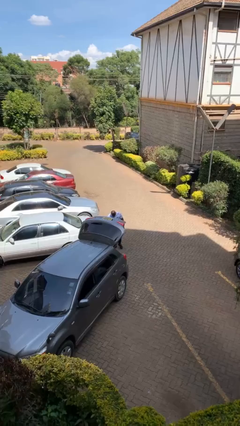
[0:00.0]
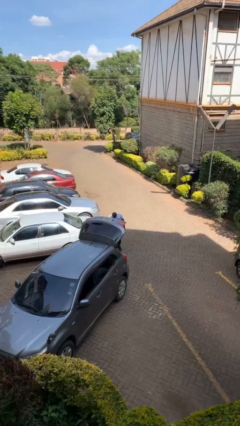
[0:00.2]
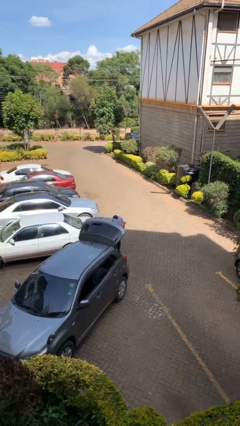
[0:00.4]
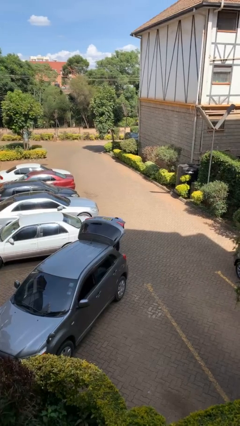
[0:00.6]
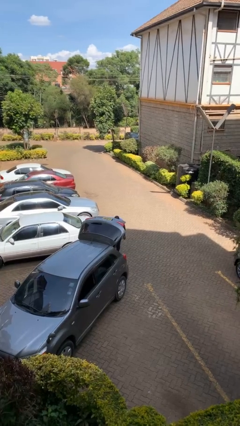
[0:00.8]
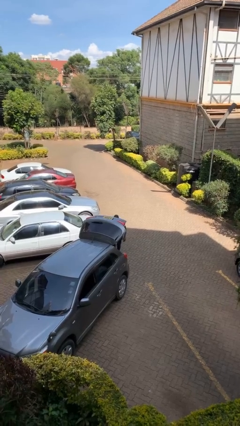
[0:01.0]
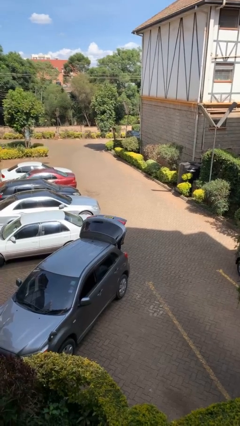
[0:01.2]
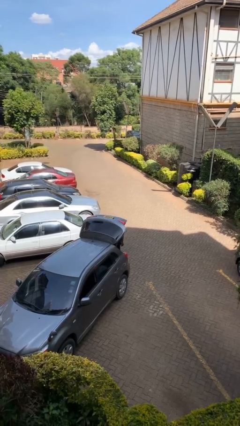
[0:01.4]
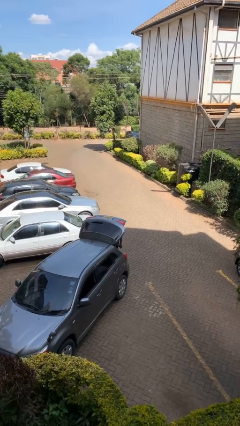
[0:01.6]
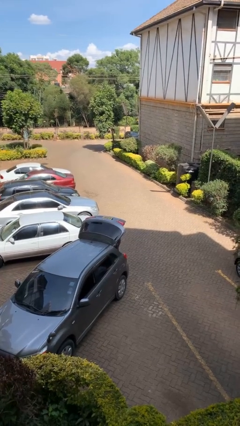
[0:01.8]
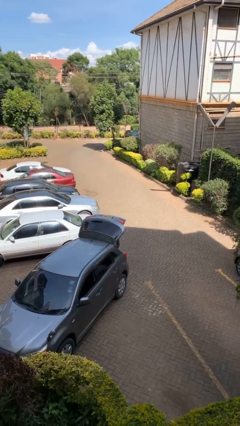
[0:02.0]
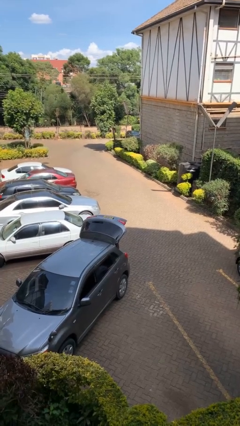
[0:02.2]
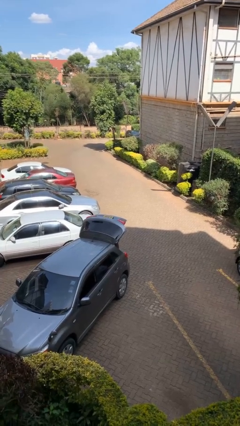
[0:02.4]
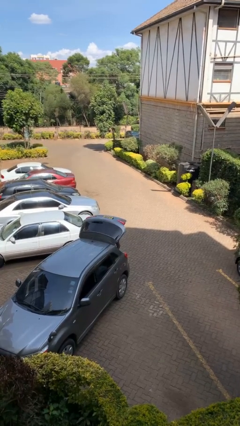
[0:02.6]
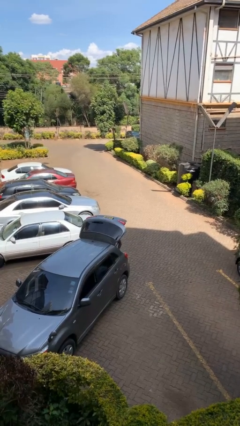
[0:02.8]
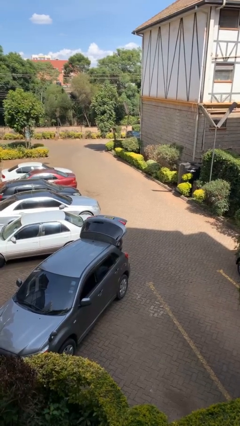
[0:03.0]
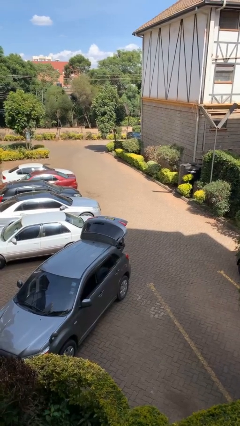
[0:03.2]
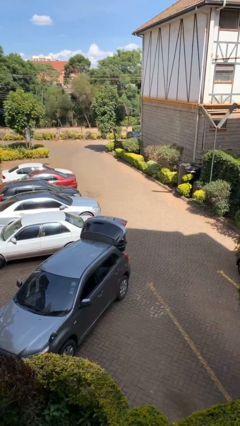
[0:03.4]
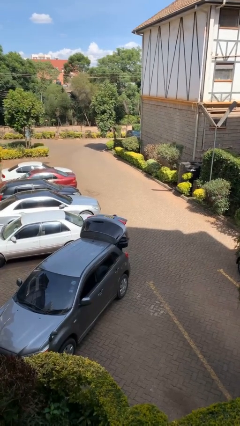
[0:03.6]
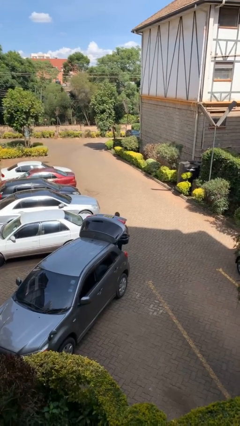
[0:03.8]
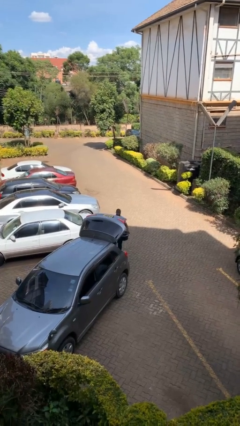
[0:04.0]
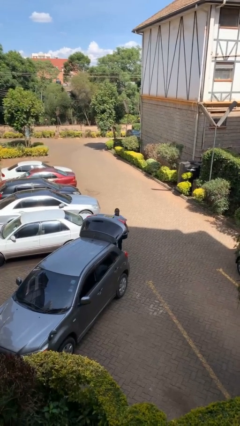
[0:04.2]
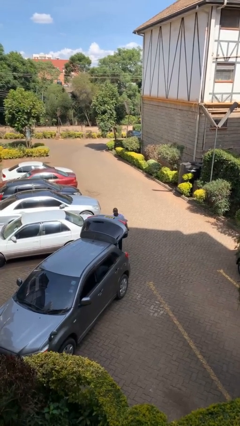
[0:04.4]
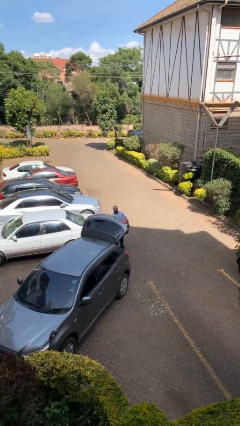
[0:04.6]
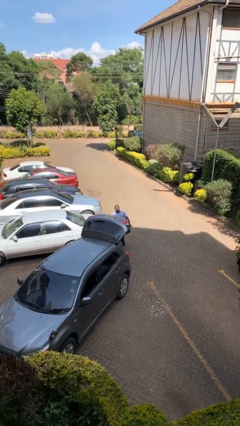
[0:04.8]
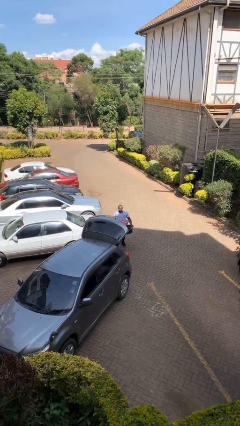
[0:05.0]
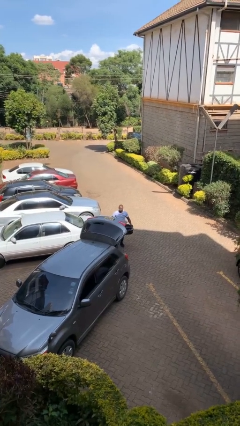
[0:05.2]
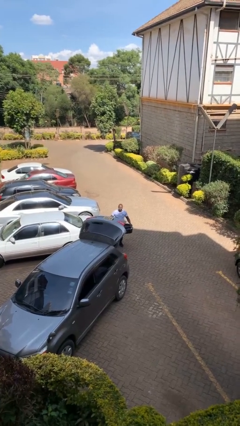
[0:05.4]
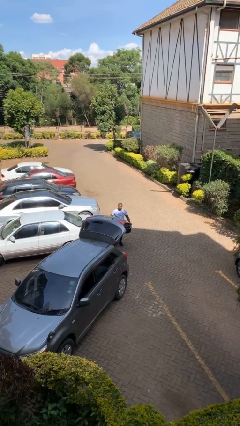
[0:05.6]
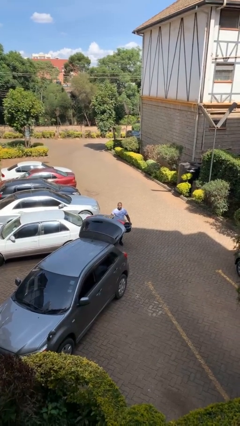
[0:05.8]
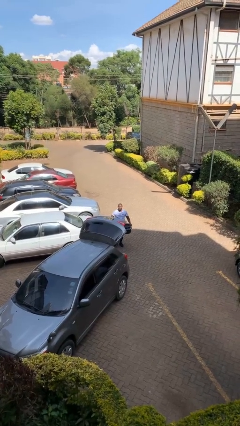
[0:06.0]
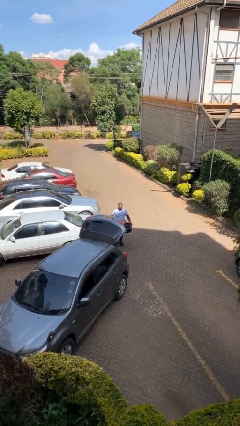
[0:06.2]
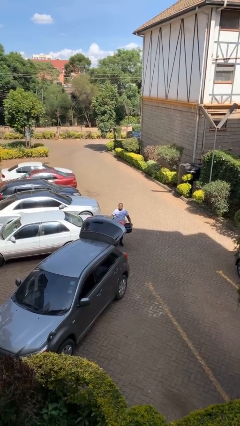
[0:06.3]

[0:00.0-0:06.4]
person unloads car

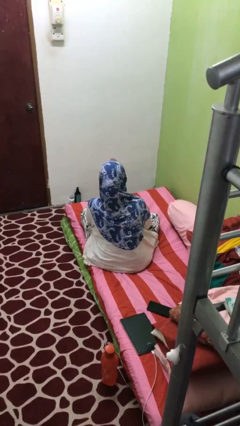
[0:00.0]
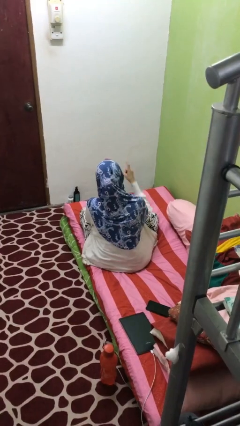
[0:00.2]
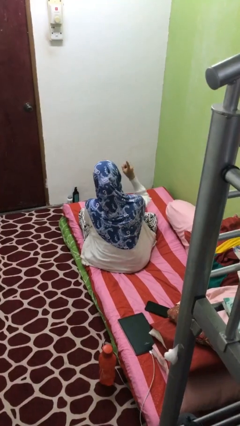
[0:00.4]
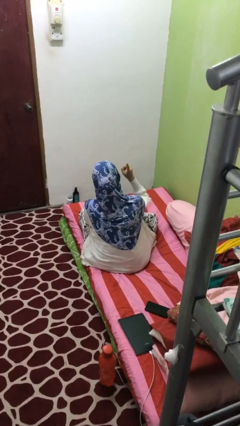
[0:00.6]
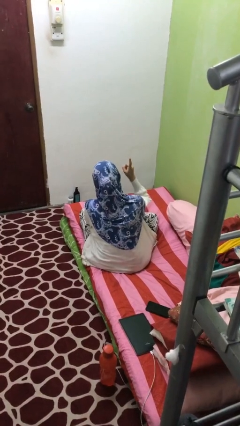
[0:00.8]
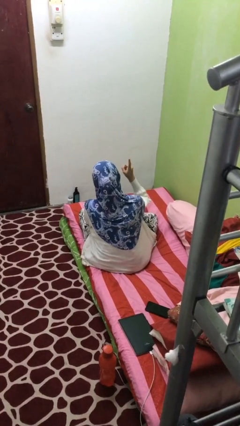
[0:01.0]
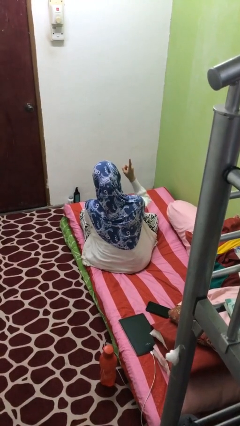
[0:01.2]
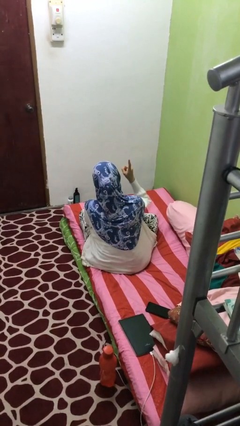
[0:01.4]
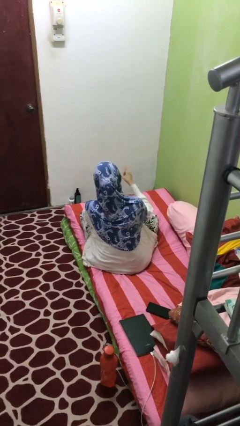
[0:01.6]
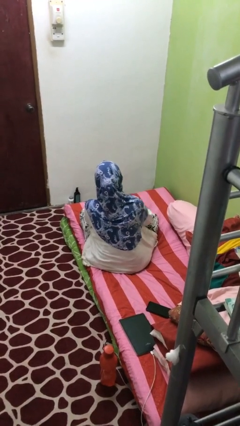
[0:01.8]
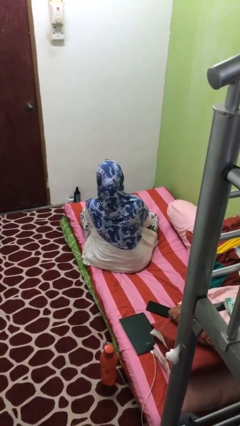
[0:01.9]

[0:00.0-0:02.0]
person gestures number one

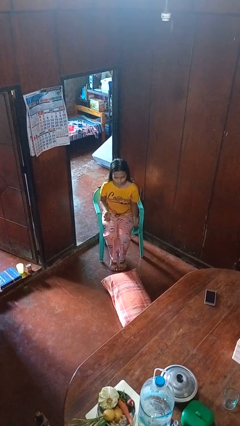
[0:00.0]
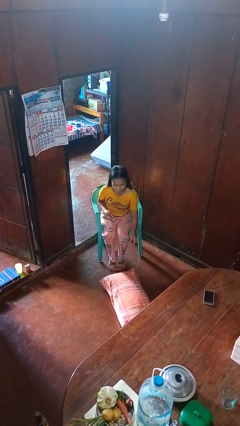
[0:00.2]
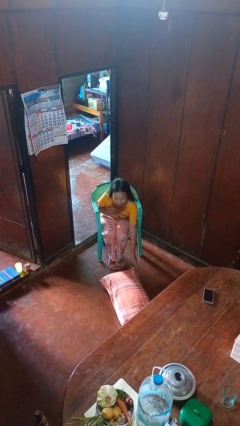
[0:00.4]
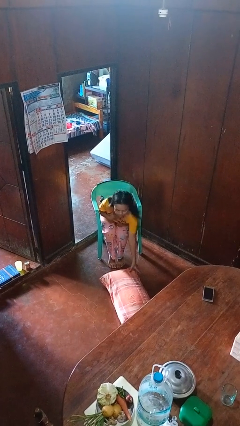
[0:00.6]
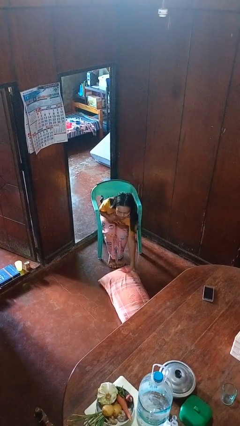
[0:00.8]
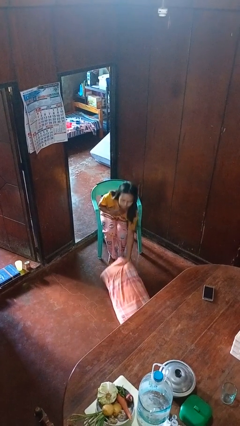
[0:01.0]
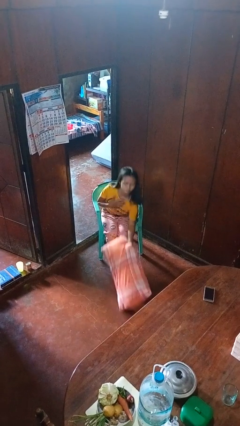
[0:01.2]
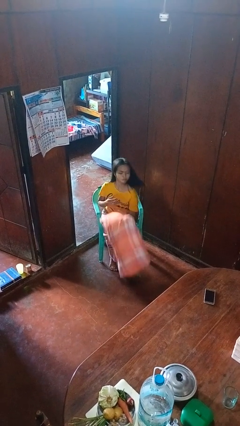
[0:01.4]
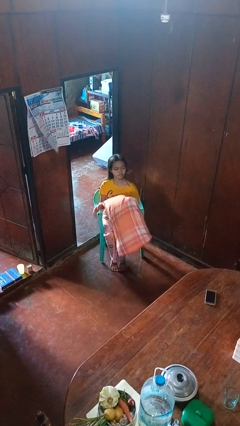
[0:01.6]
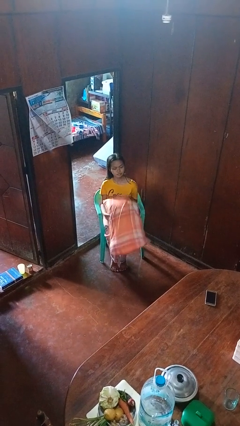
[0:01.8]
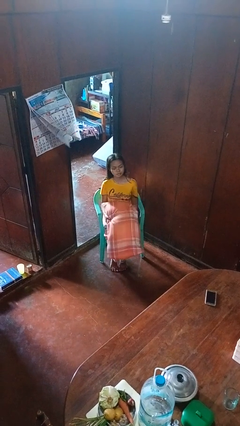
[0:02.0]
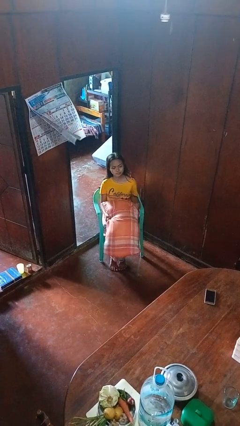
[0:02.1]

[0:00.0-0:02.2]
person picks up object from floor

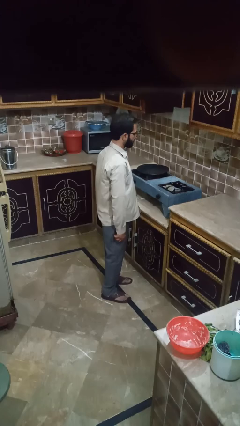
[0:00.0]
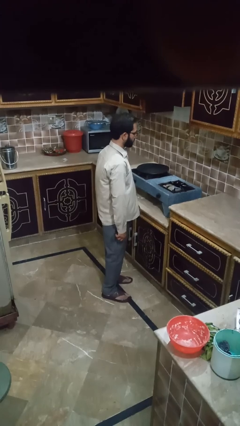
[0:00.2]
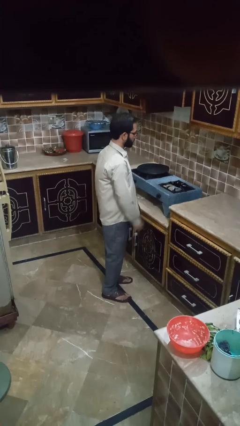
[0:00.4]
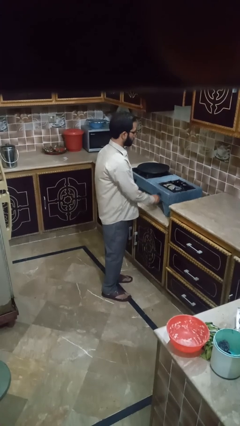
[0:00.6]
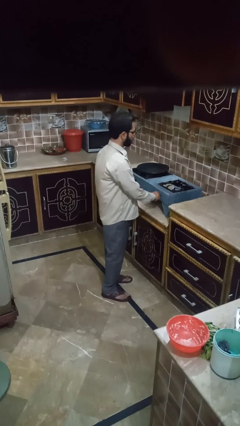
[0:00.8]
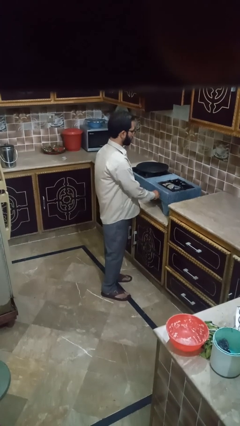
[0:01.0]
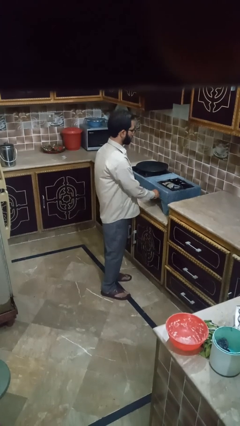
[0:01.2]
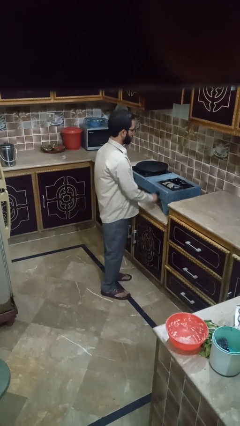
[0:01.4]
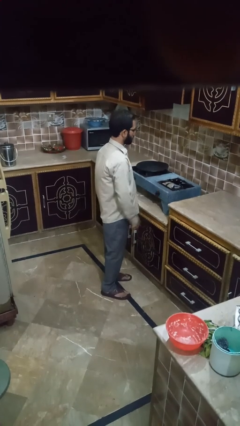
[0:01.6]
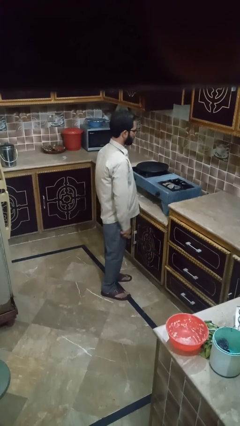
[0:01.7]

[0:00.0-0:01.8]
person turns on stovetop

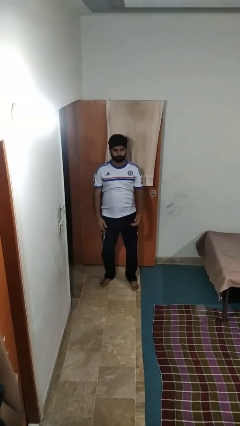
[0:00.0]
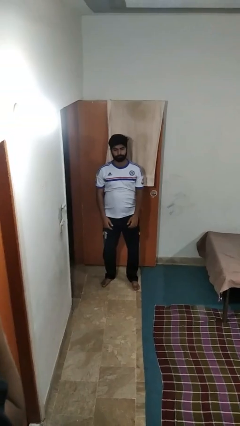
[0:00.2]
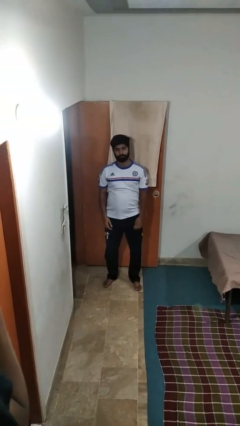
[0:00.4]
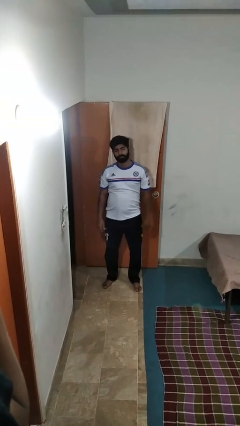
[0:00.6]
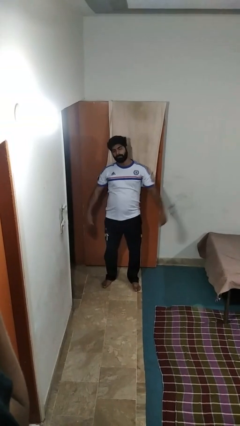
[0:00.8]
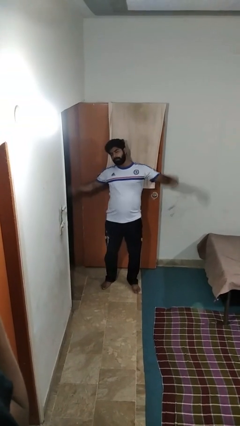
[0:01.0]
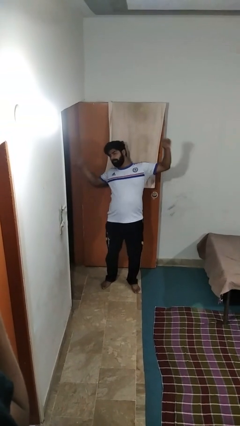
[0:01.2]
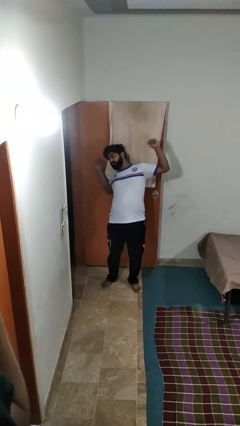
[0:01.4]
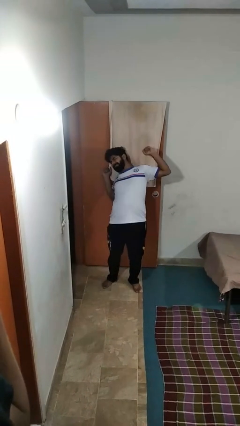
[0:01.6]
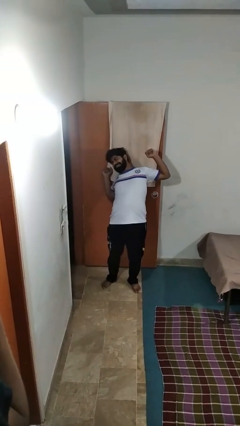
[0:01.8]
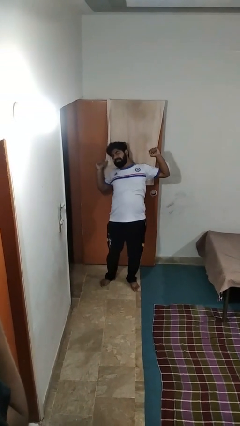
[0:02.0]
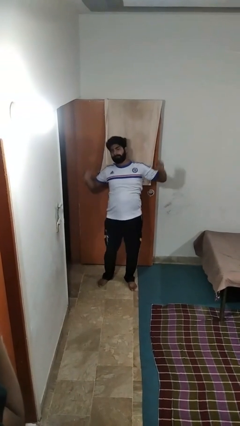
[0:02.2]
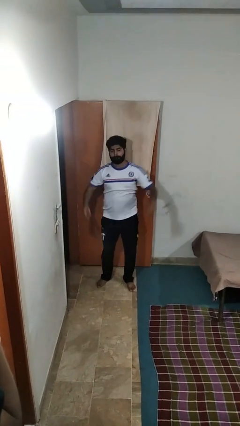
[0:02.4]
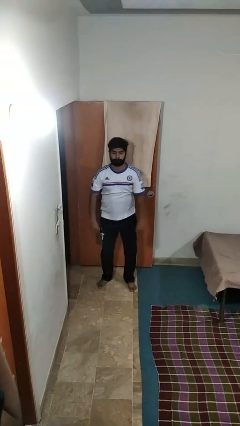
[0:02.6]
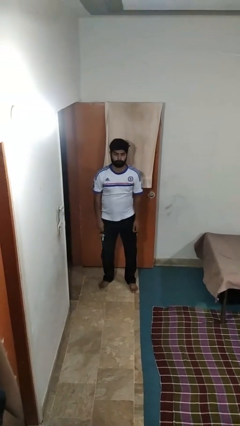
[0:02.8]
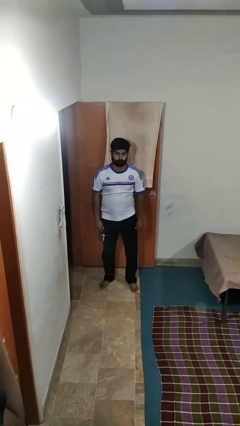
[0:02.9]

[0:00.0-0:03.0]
person stretches arms to side

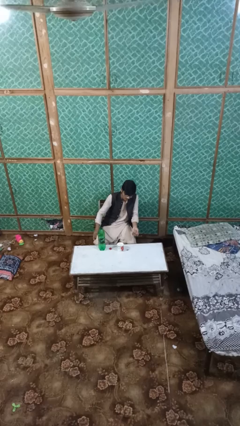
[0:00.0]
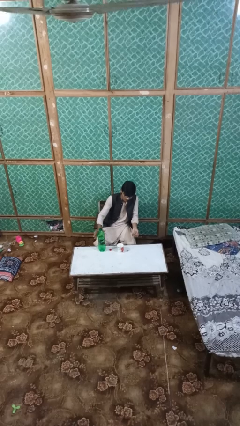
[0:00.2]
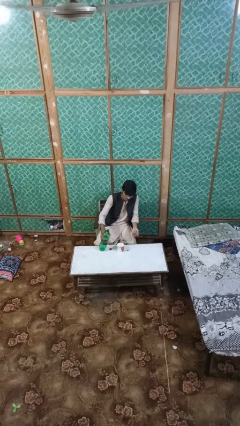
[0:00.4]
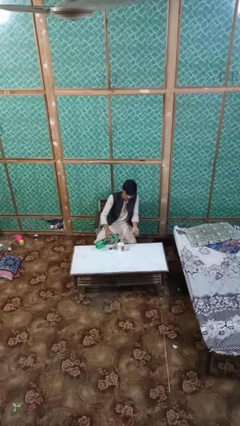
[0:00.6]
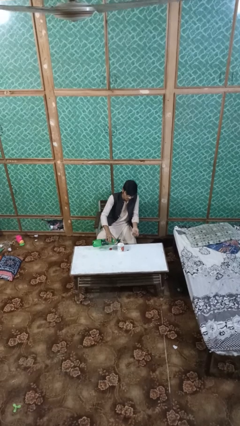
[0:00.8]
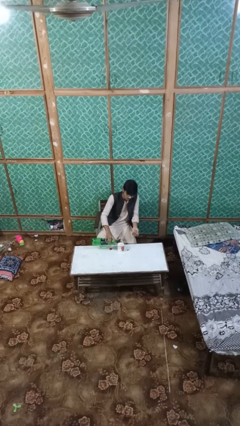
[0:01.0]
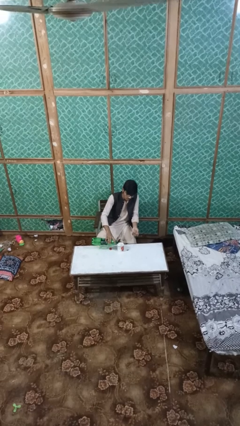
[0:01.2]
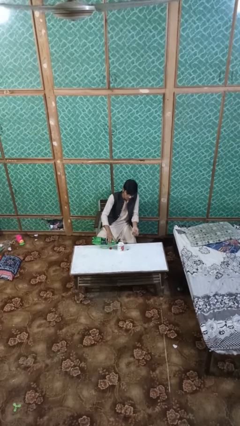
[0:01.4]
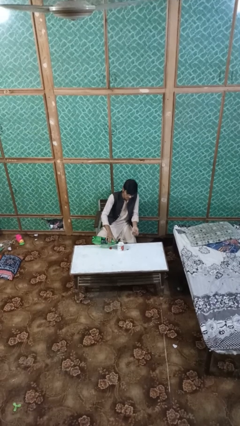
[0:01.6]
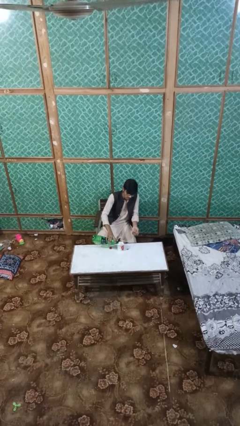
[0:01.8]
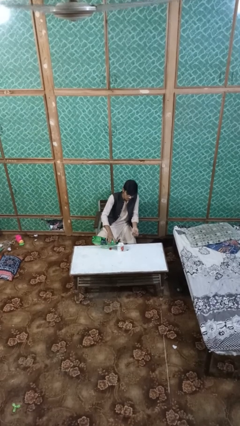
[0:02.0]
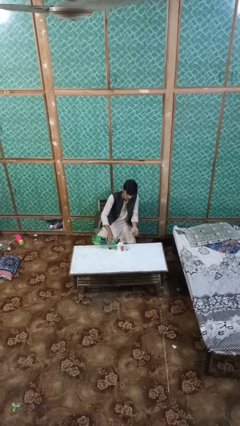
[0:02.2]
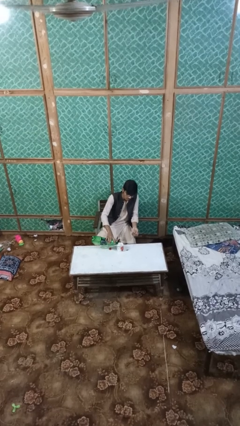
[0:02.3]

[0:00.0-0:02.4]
person pours liquid into cup
